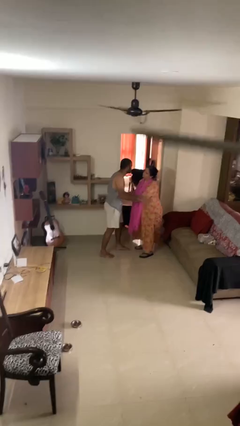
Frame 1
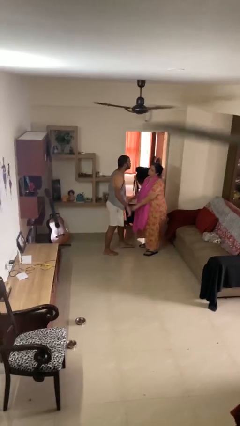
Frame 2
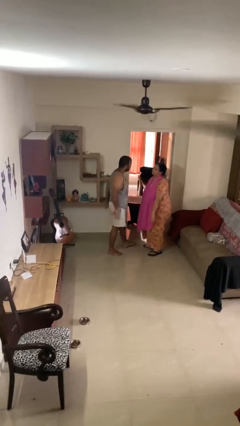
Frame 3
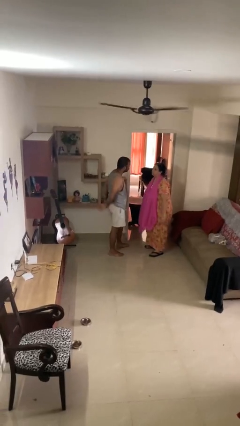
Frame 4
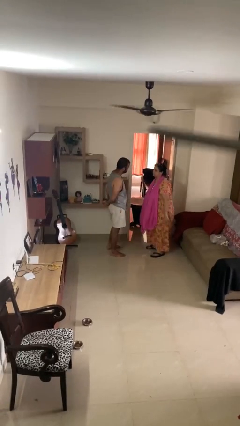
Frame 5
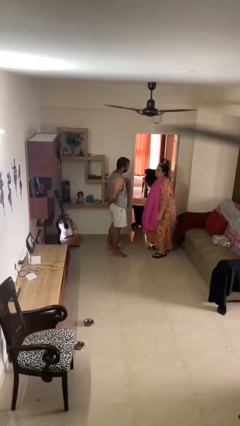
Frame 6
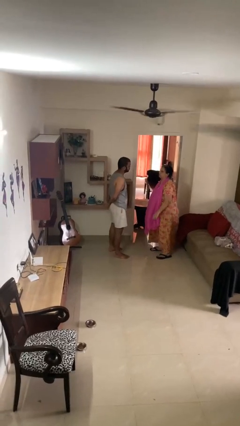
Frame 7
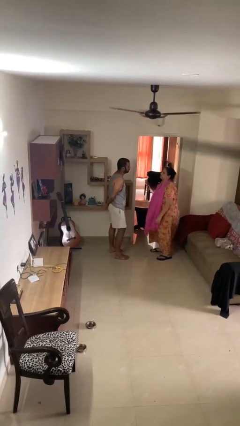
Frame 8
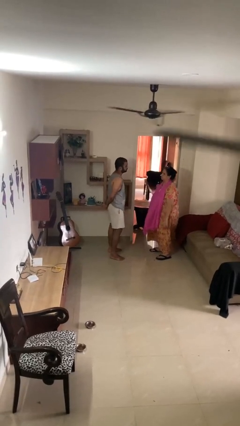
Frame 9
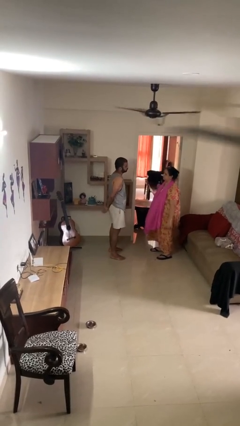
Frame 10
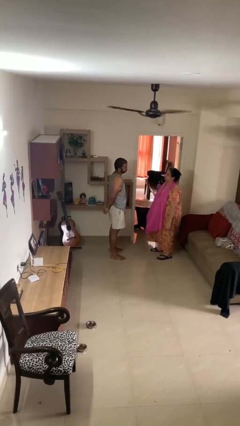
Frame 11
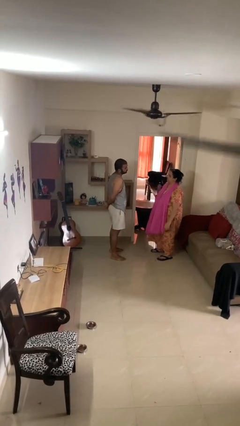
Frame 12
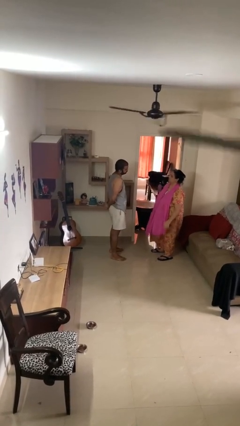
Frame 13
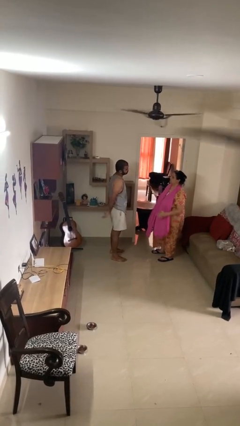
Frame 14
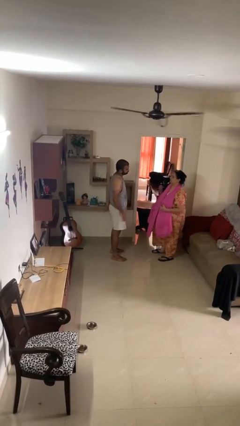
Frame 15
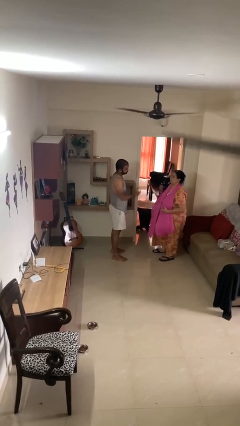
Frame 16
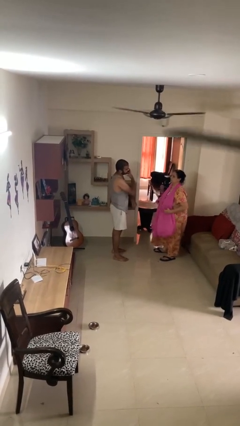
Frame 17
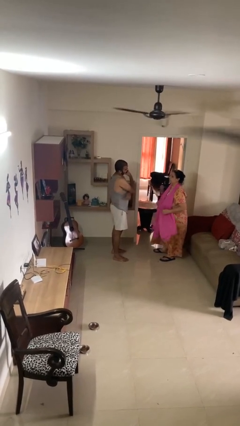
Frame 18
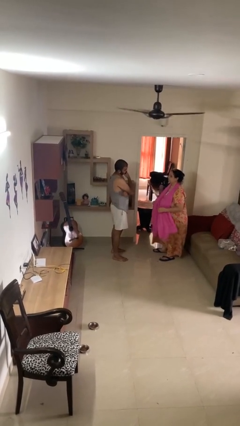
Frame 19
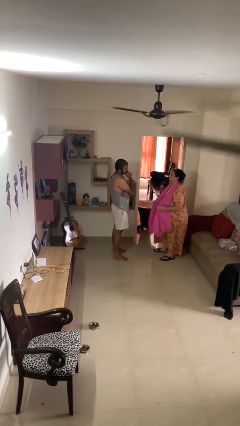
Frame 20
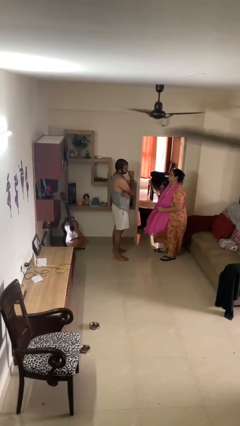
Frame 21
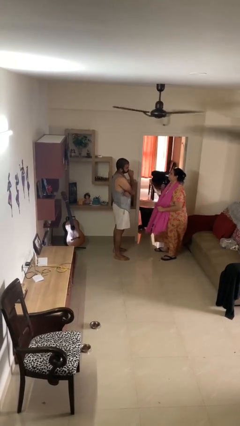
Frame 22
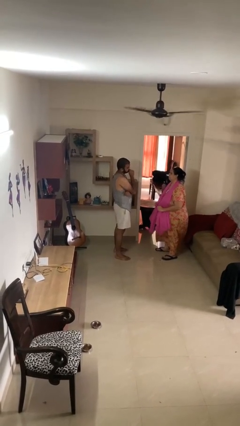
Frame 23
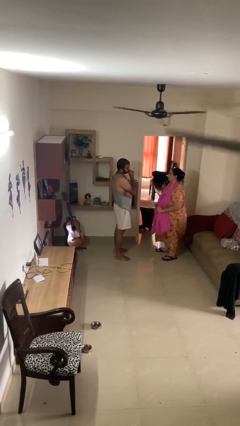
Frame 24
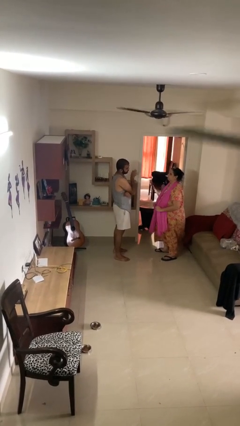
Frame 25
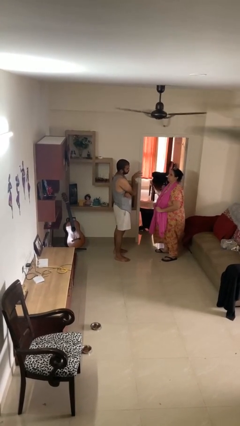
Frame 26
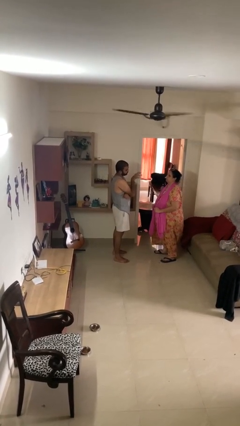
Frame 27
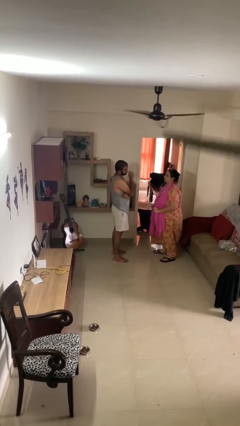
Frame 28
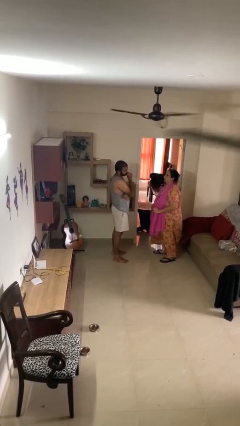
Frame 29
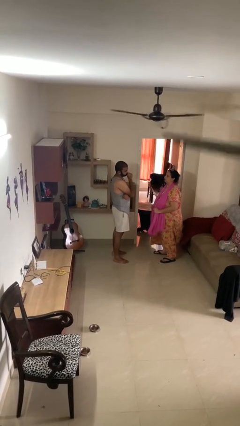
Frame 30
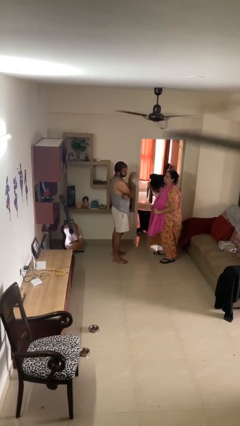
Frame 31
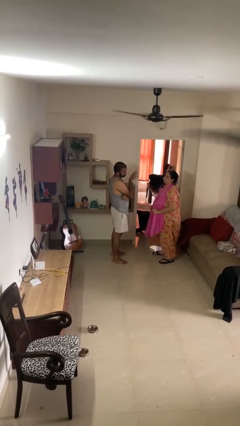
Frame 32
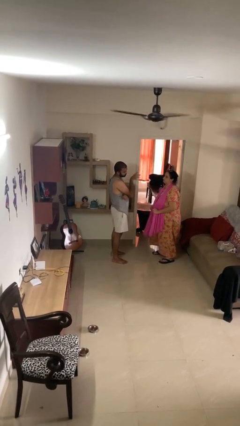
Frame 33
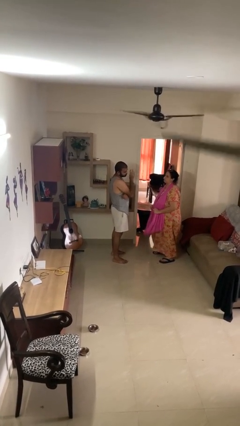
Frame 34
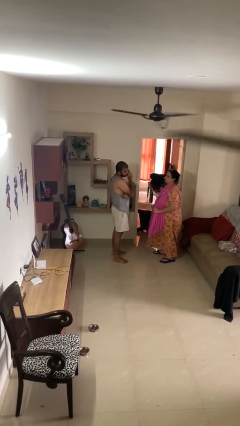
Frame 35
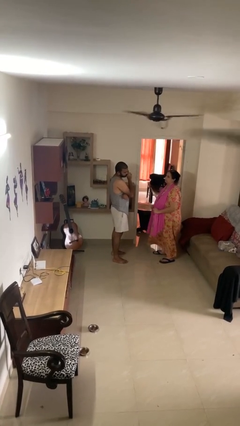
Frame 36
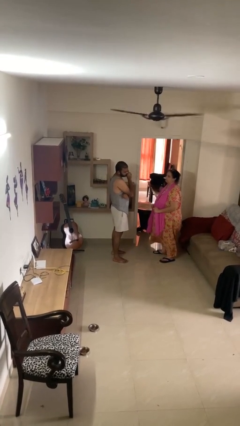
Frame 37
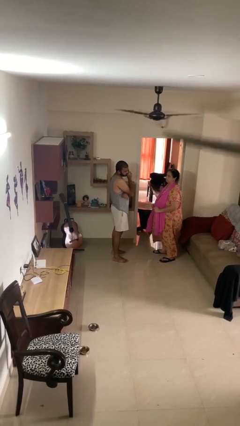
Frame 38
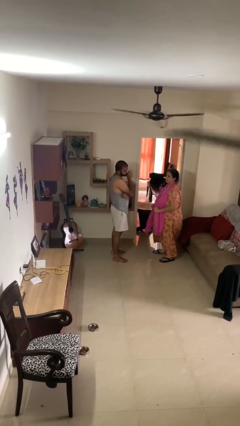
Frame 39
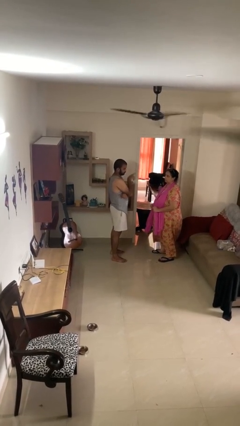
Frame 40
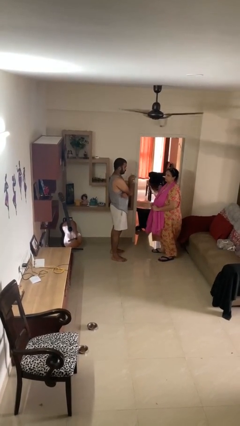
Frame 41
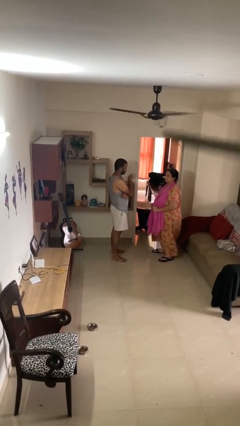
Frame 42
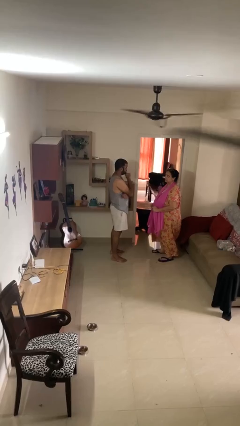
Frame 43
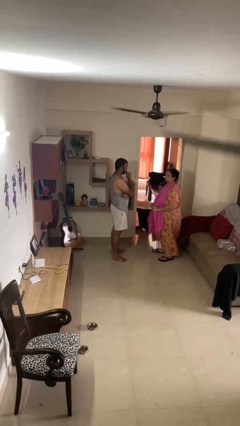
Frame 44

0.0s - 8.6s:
person talks to person

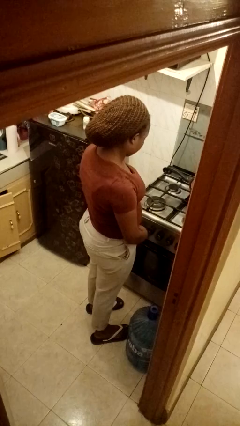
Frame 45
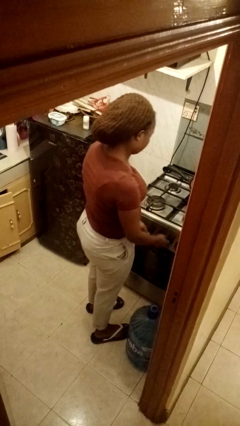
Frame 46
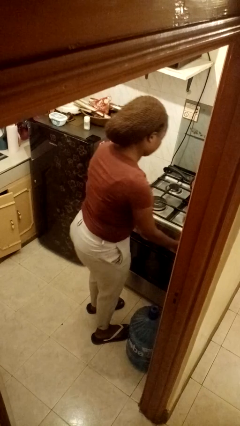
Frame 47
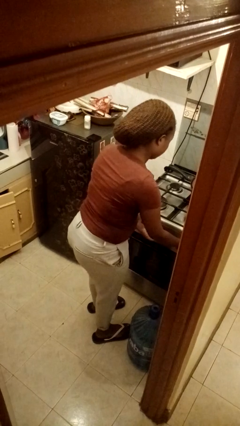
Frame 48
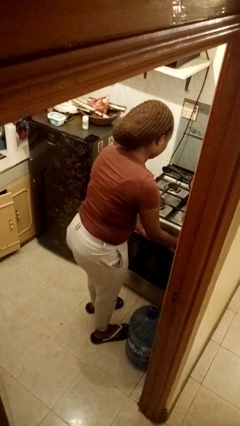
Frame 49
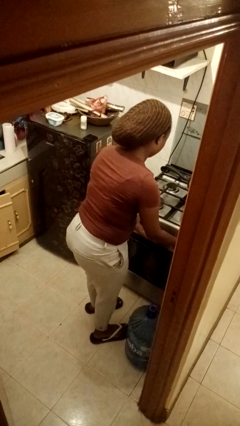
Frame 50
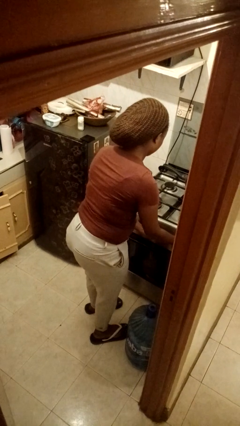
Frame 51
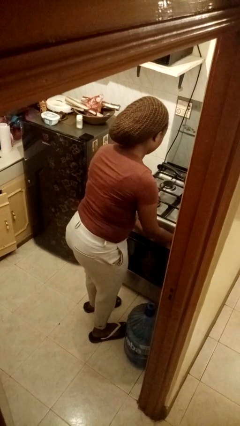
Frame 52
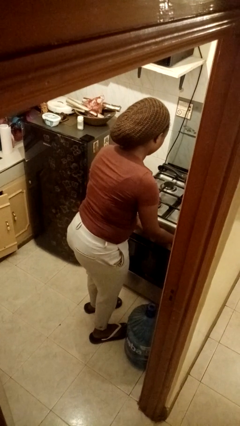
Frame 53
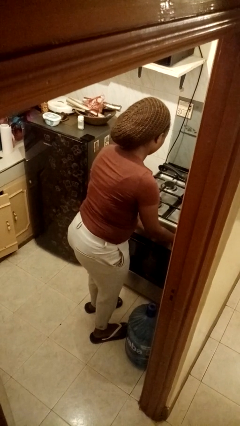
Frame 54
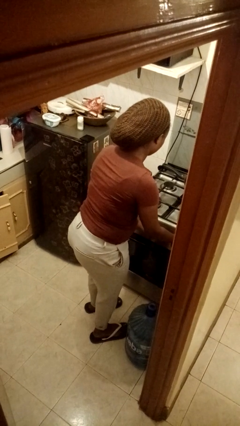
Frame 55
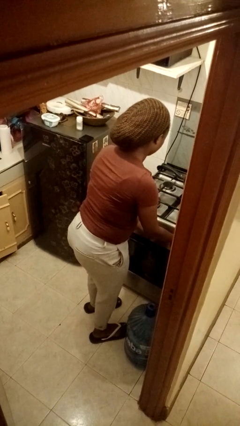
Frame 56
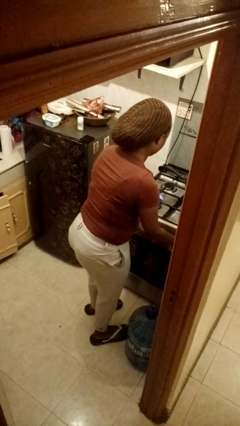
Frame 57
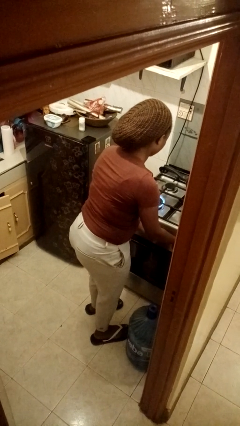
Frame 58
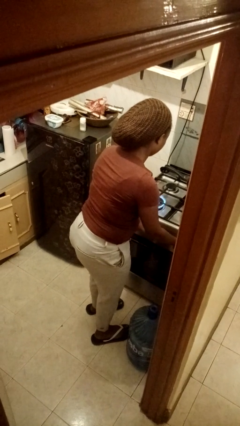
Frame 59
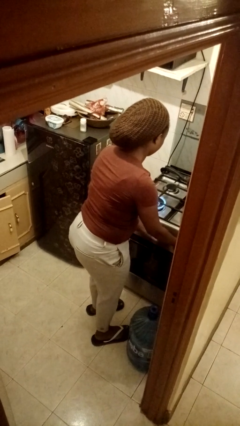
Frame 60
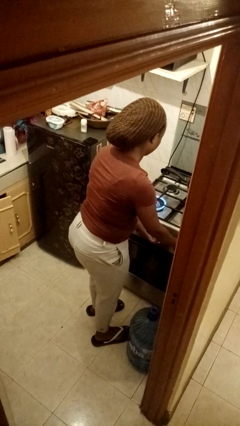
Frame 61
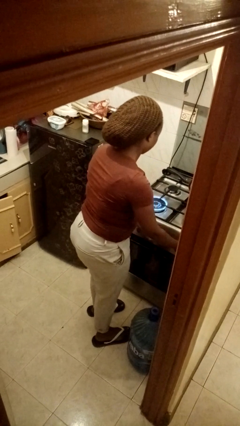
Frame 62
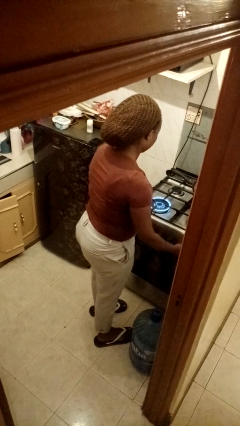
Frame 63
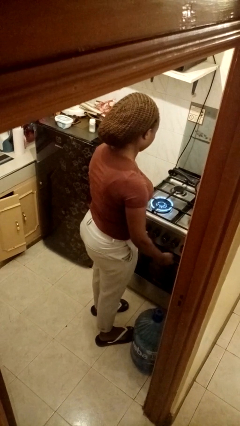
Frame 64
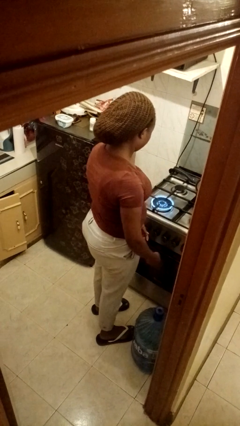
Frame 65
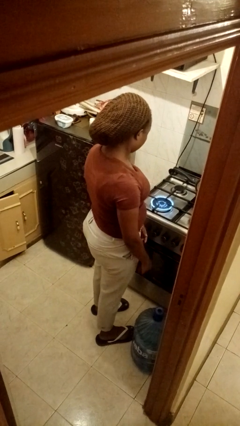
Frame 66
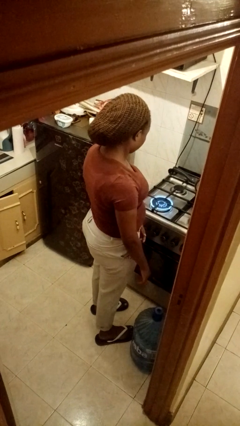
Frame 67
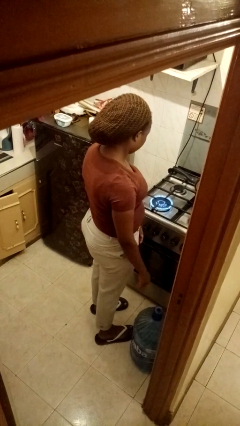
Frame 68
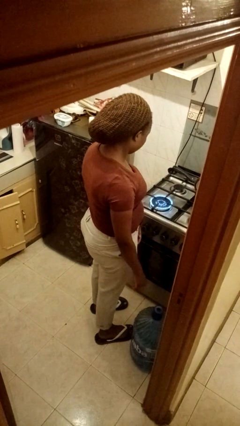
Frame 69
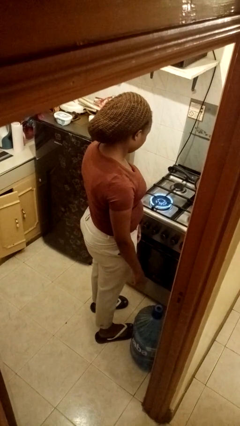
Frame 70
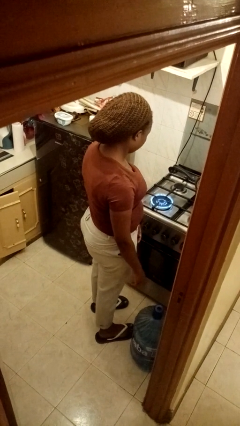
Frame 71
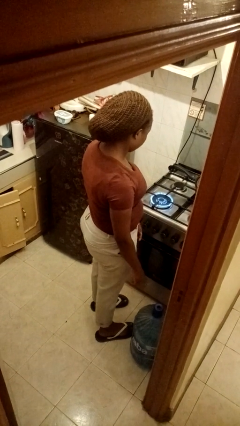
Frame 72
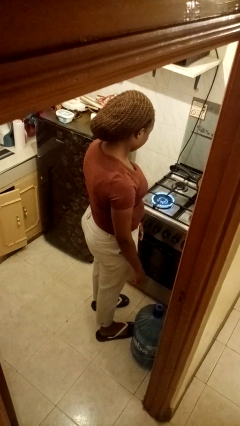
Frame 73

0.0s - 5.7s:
person turns on stovetop

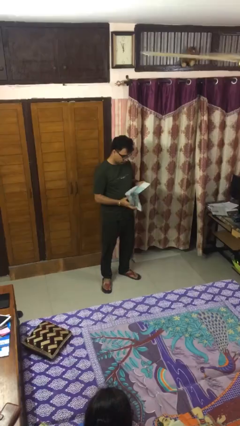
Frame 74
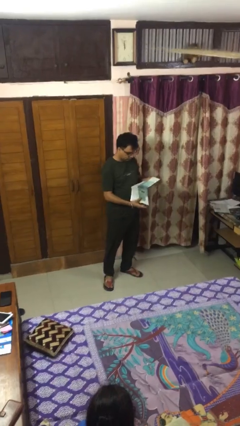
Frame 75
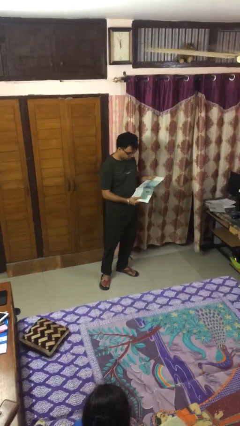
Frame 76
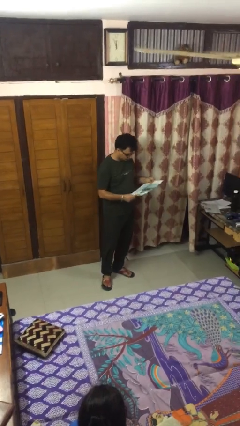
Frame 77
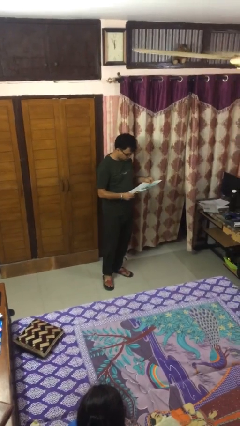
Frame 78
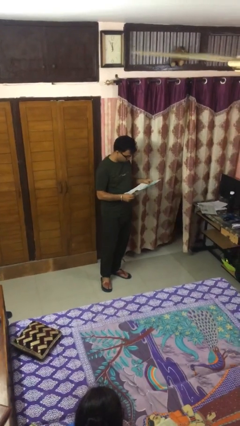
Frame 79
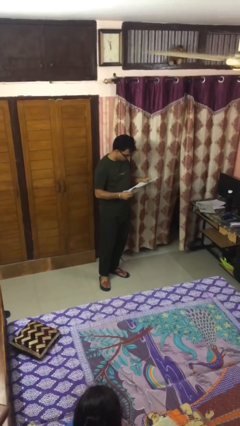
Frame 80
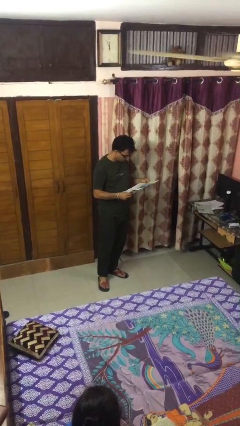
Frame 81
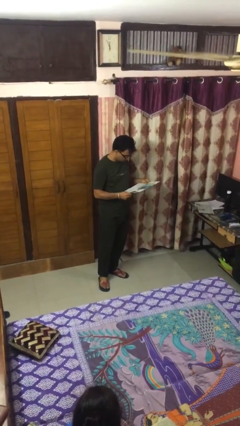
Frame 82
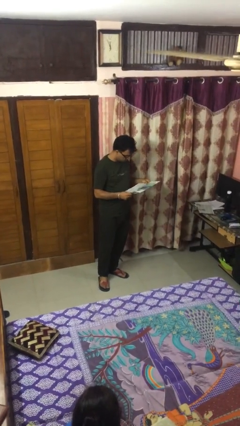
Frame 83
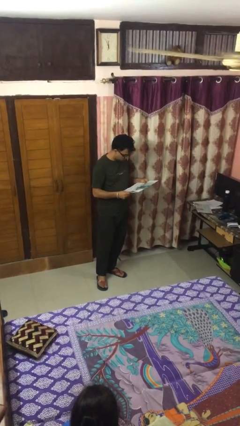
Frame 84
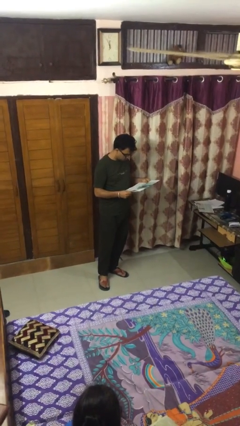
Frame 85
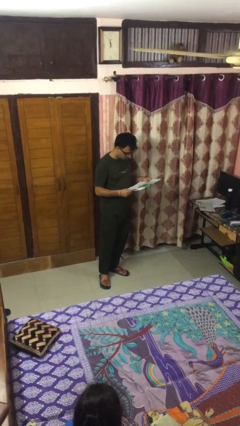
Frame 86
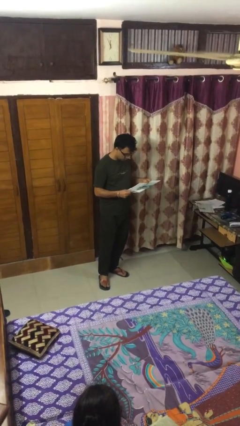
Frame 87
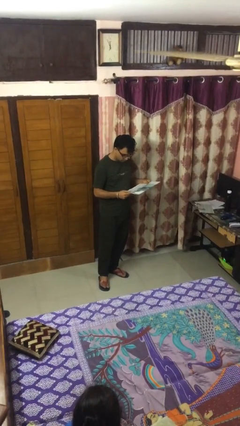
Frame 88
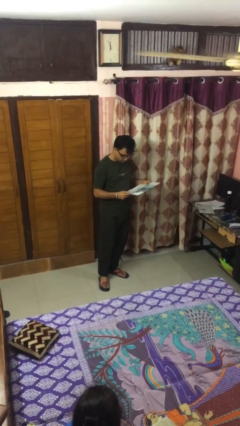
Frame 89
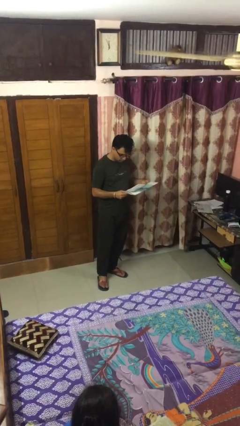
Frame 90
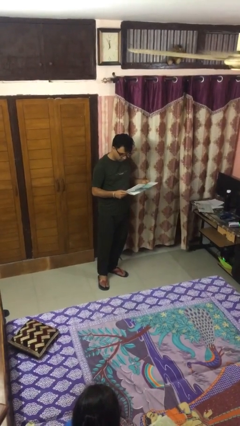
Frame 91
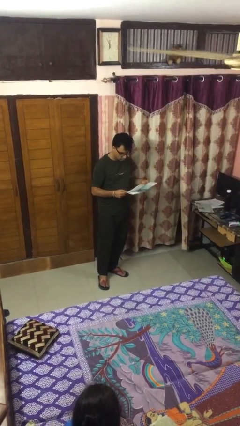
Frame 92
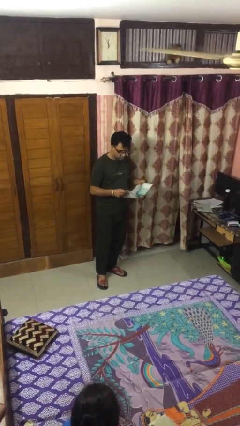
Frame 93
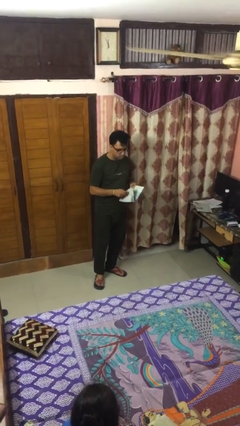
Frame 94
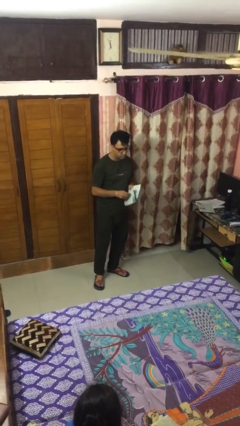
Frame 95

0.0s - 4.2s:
person reads newspaper
